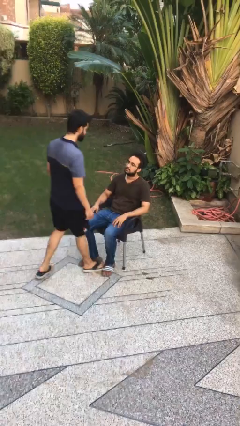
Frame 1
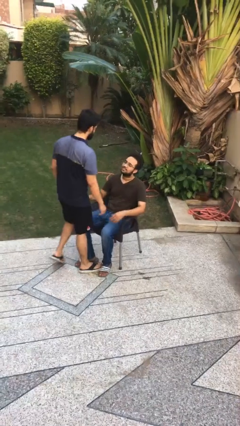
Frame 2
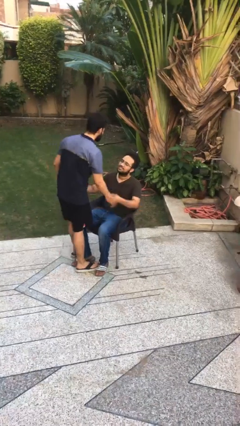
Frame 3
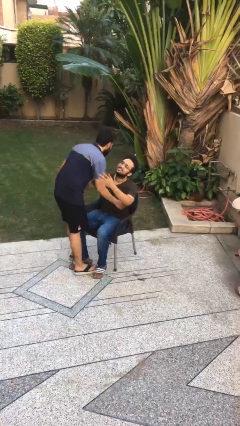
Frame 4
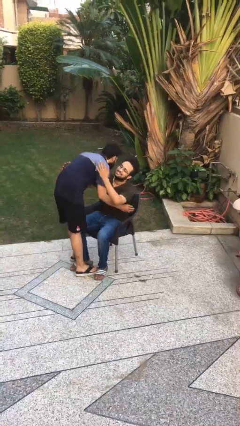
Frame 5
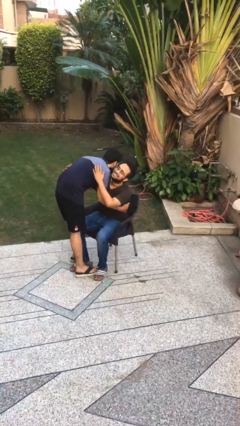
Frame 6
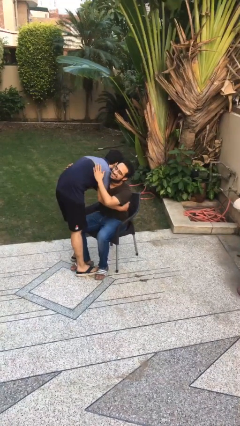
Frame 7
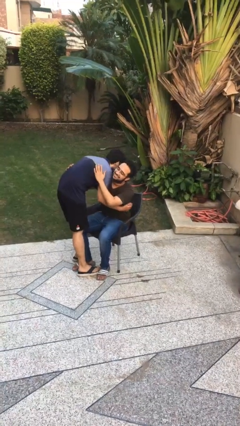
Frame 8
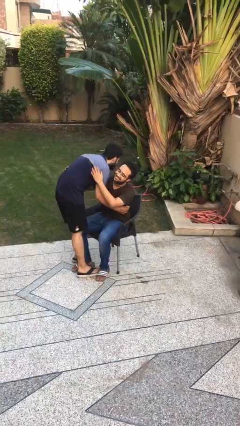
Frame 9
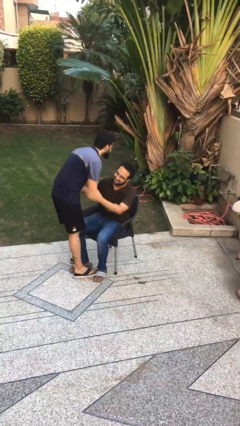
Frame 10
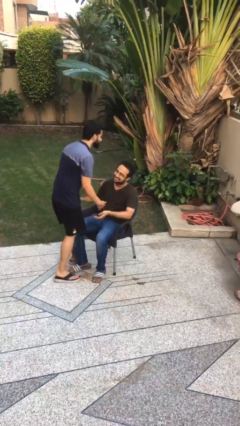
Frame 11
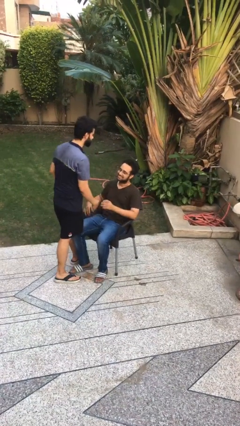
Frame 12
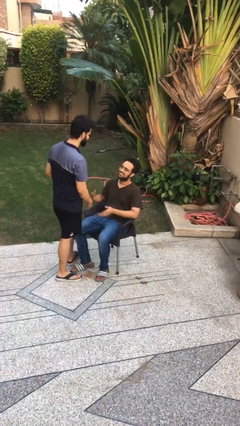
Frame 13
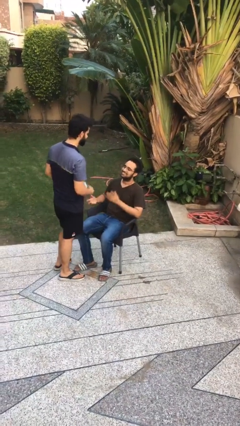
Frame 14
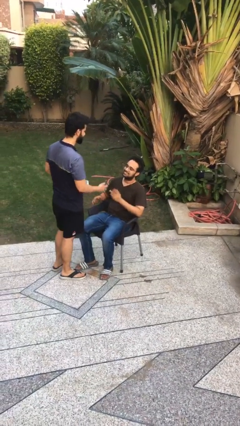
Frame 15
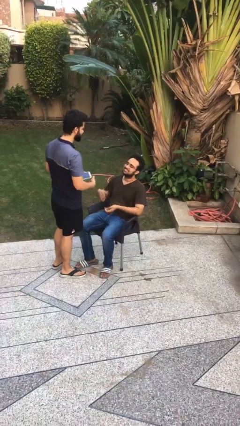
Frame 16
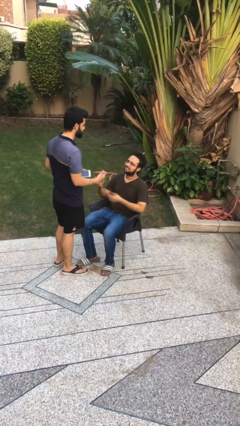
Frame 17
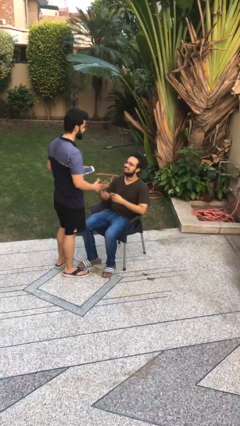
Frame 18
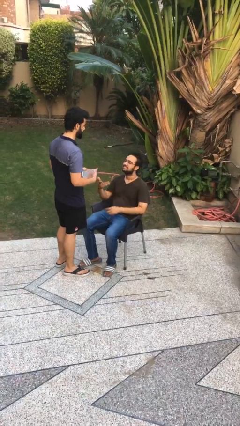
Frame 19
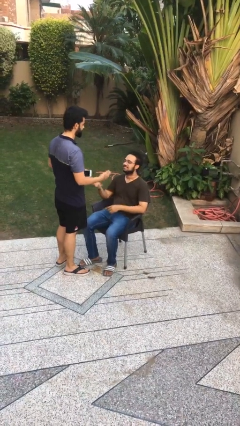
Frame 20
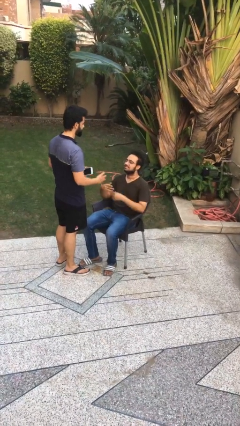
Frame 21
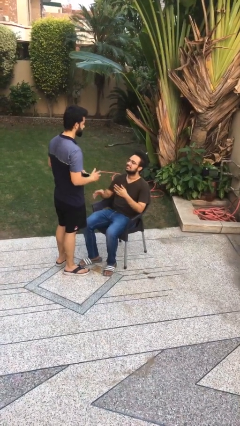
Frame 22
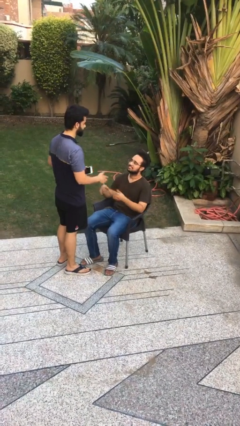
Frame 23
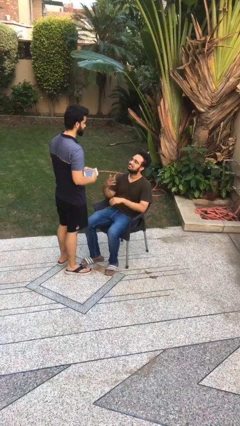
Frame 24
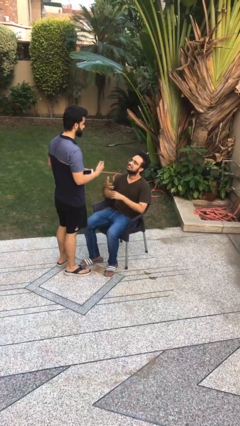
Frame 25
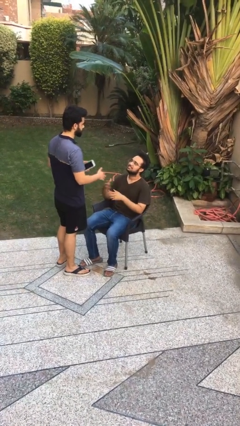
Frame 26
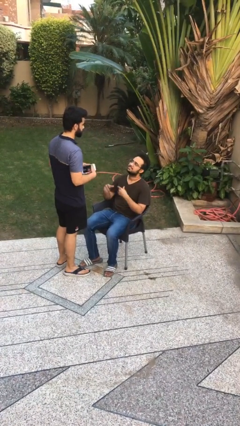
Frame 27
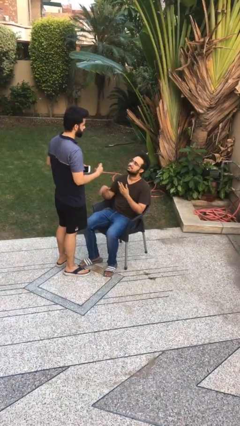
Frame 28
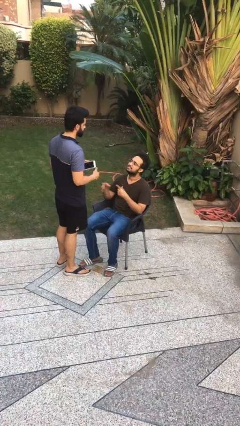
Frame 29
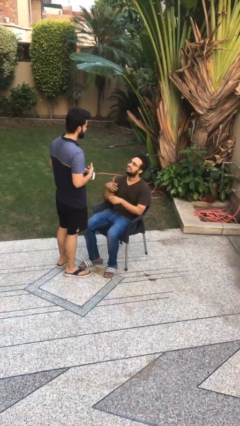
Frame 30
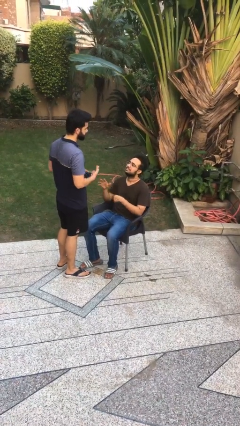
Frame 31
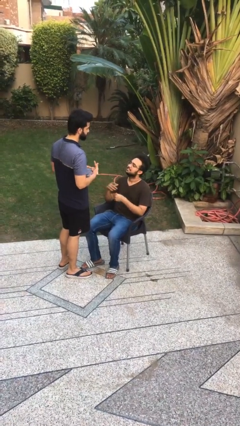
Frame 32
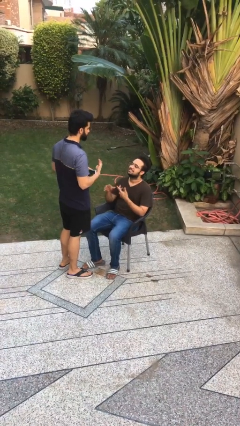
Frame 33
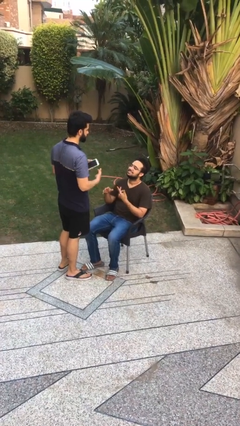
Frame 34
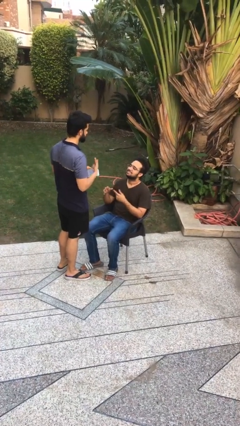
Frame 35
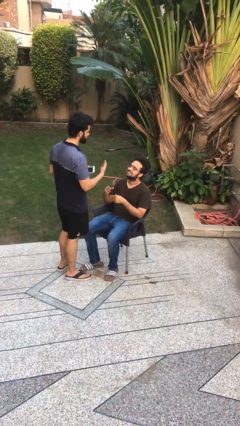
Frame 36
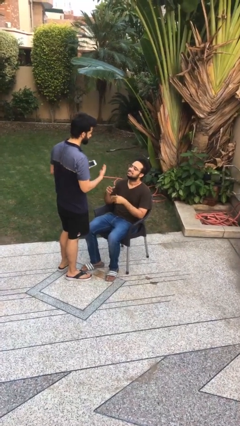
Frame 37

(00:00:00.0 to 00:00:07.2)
person embraces person

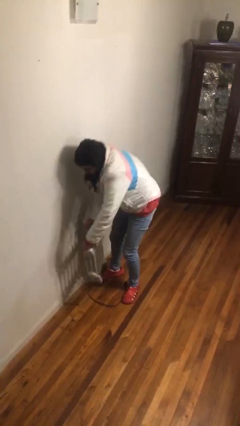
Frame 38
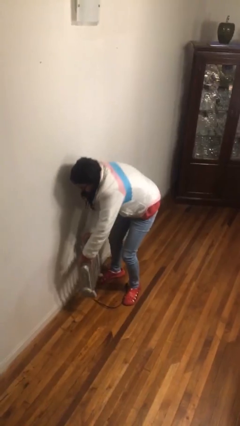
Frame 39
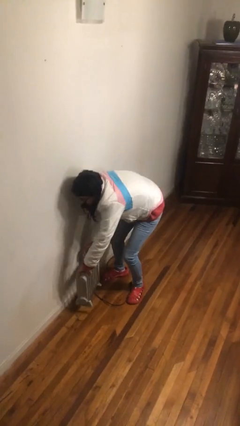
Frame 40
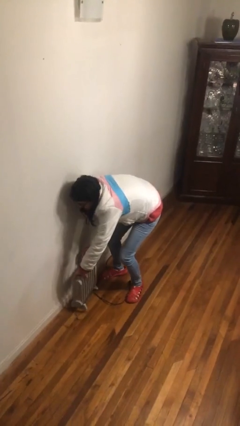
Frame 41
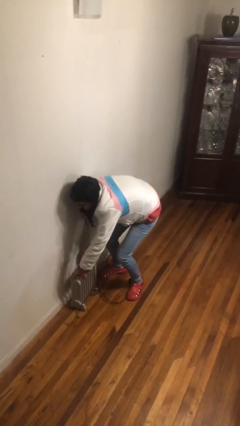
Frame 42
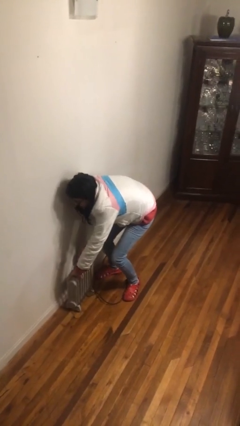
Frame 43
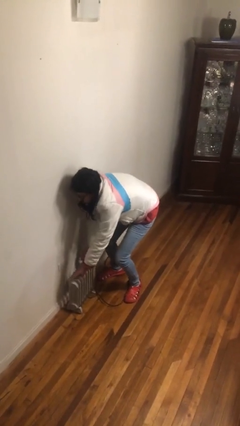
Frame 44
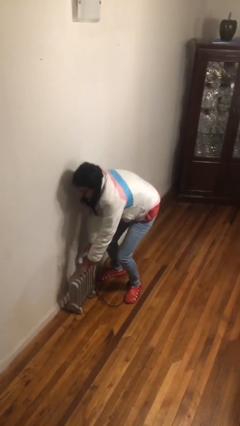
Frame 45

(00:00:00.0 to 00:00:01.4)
person puts down object on floor

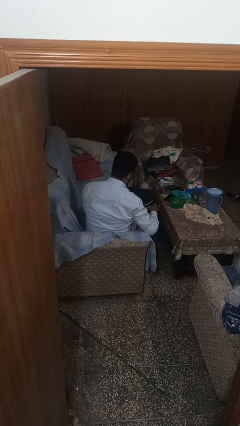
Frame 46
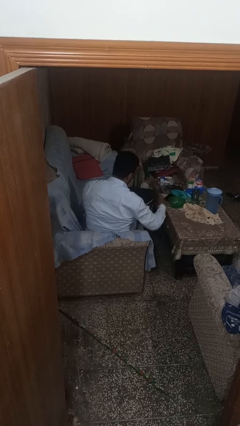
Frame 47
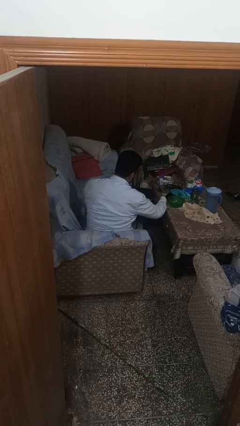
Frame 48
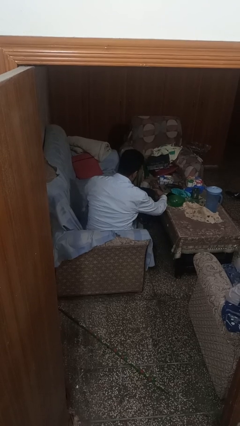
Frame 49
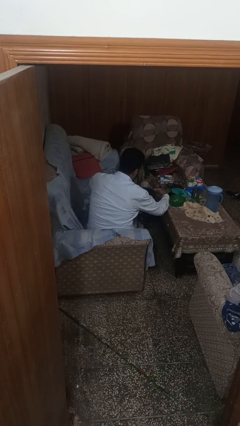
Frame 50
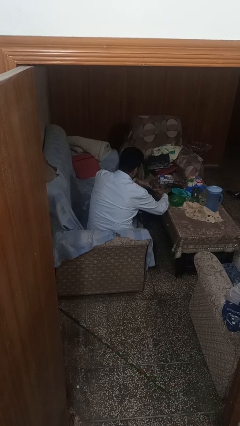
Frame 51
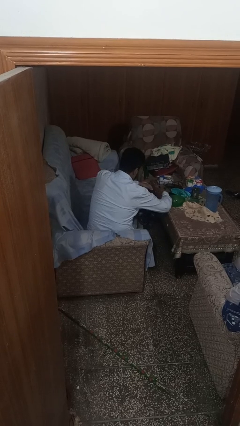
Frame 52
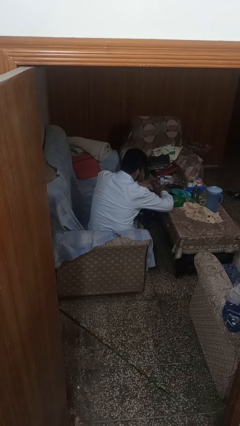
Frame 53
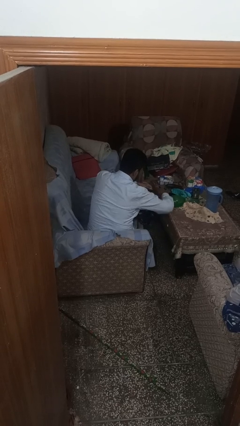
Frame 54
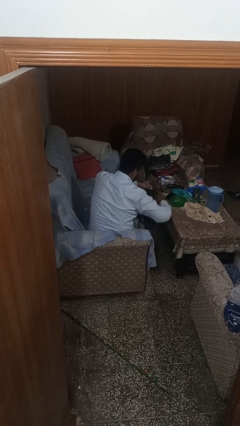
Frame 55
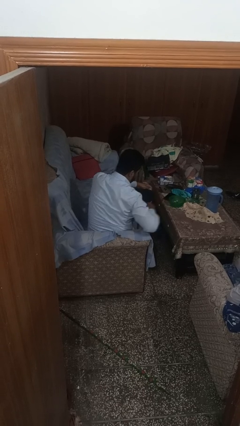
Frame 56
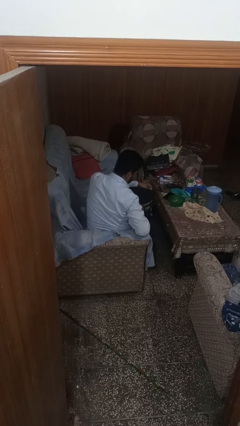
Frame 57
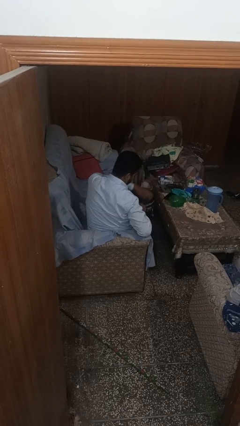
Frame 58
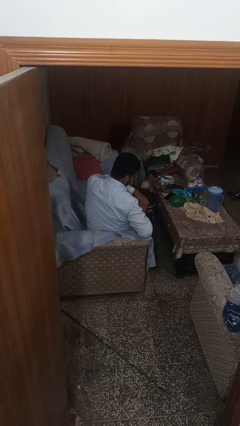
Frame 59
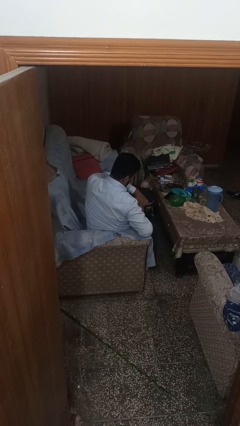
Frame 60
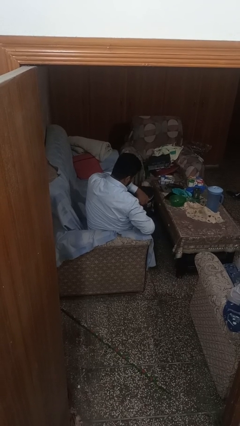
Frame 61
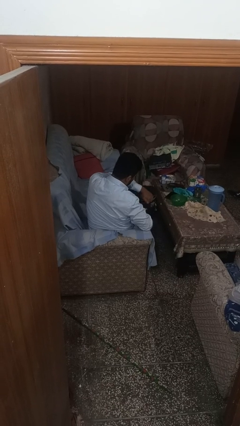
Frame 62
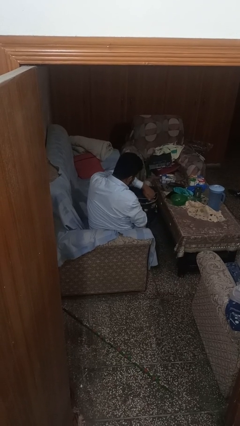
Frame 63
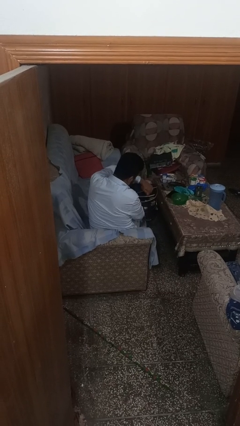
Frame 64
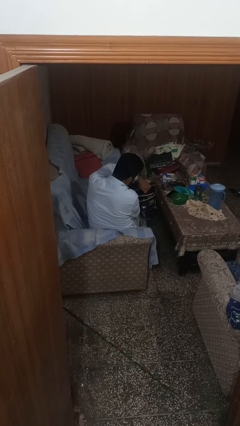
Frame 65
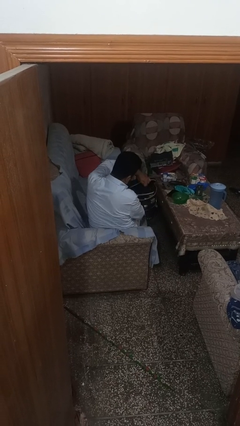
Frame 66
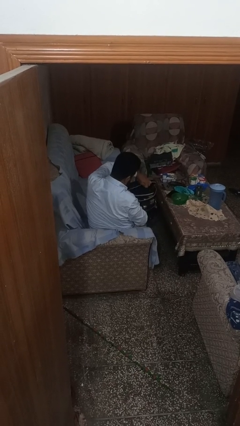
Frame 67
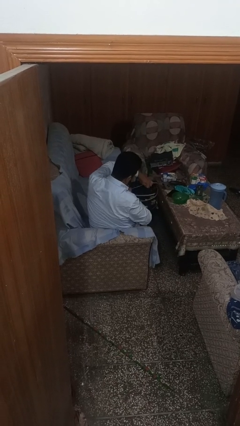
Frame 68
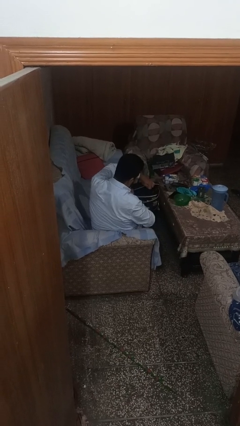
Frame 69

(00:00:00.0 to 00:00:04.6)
person opens suitcase

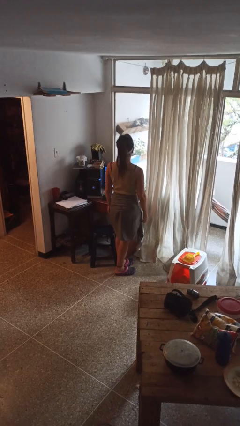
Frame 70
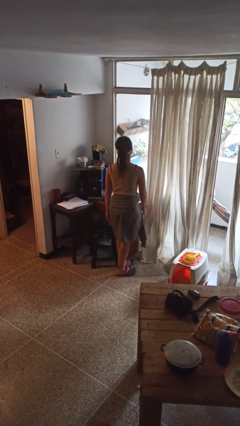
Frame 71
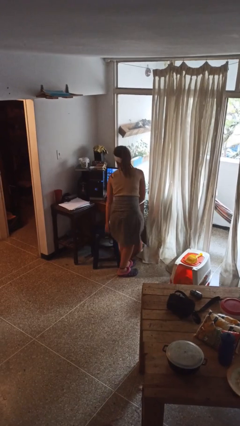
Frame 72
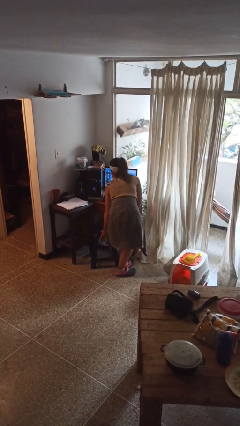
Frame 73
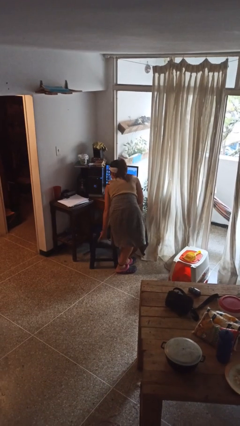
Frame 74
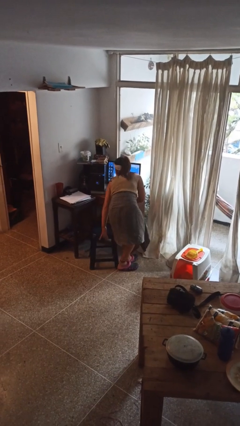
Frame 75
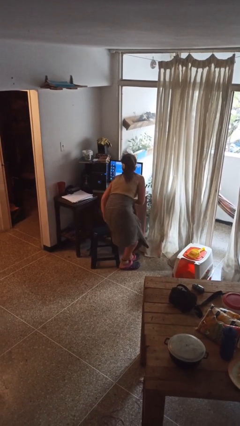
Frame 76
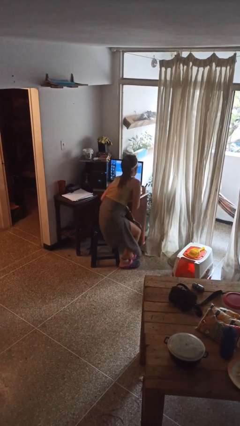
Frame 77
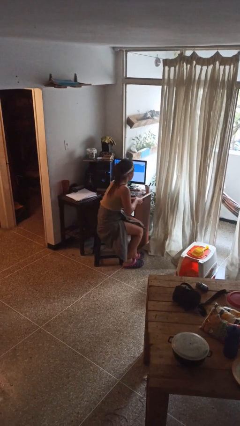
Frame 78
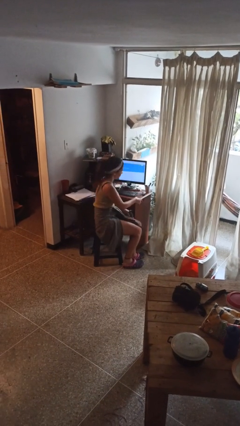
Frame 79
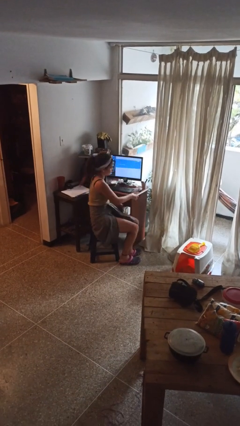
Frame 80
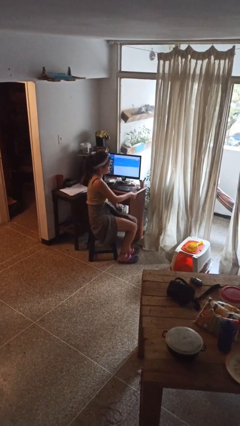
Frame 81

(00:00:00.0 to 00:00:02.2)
person sits down

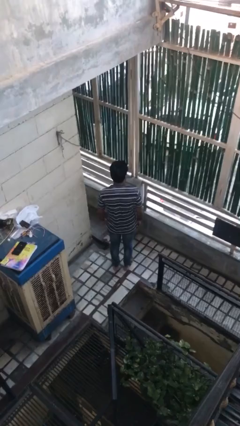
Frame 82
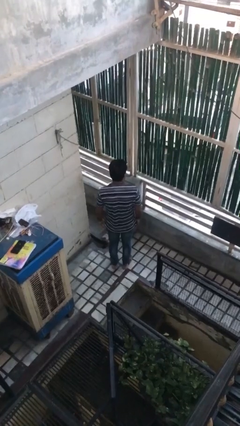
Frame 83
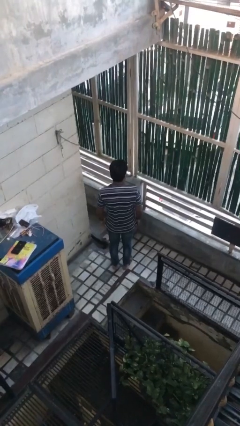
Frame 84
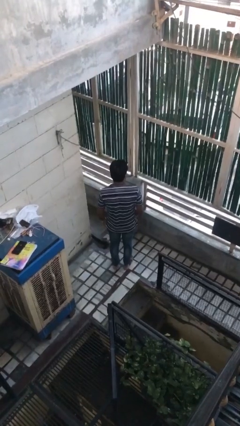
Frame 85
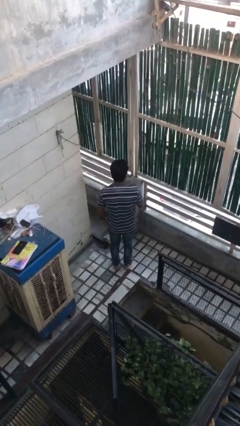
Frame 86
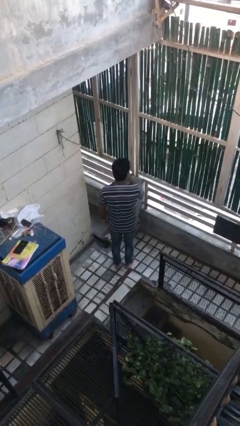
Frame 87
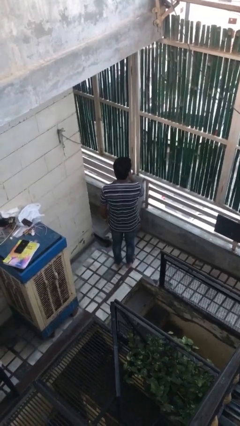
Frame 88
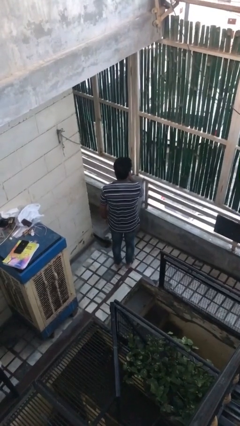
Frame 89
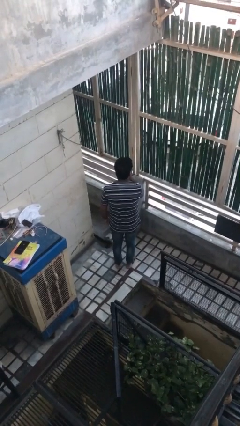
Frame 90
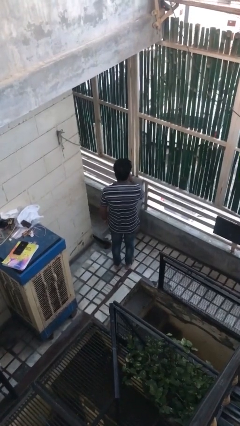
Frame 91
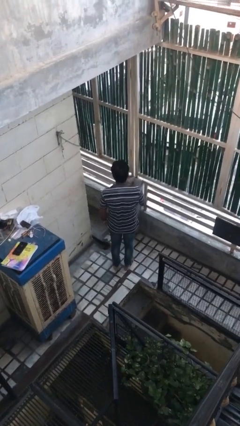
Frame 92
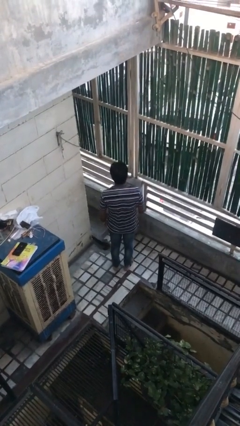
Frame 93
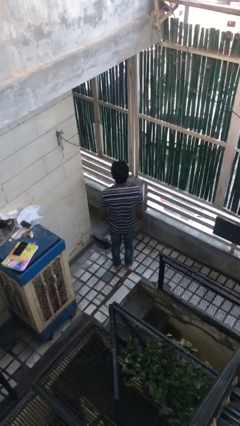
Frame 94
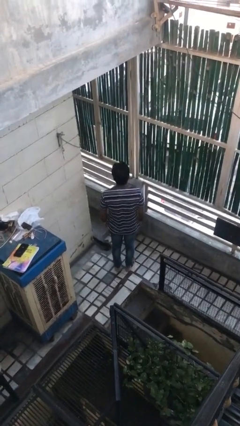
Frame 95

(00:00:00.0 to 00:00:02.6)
person gestures be quiet
